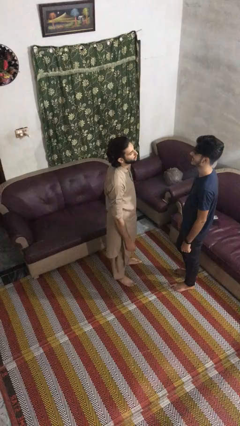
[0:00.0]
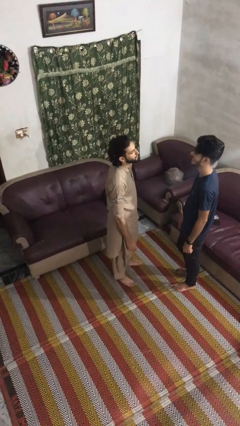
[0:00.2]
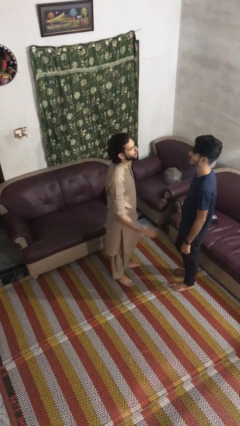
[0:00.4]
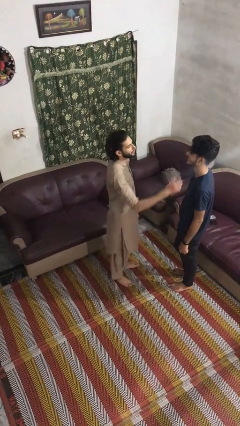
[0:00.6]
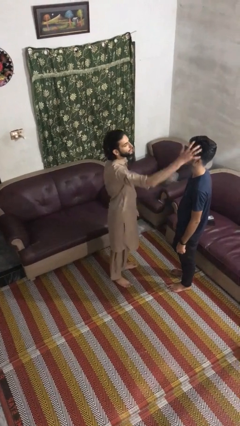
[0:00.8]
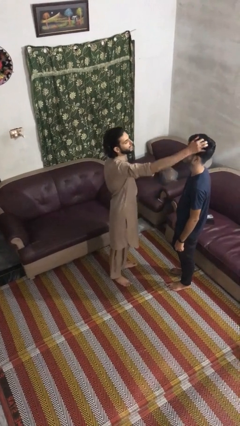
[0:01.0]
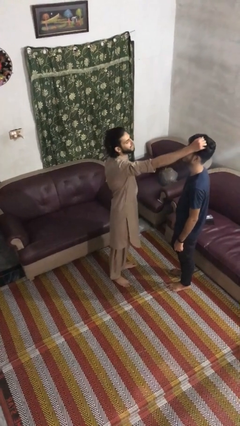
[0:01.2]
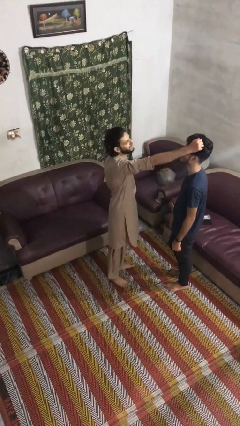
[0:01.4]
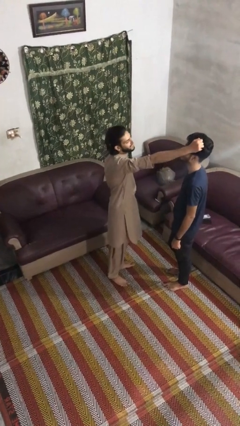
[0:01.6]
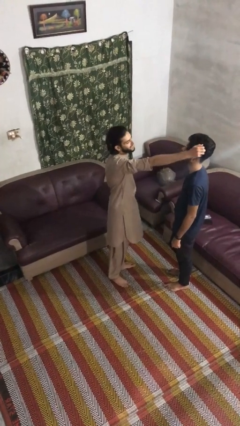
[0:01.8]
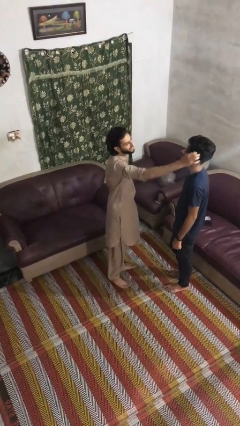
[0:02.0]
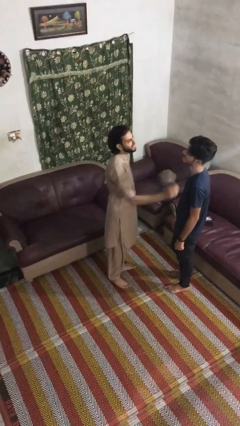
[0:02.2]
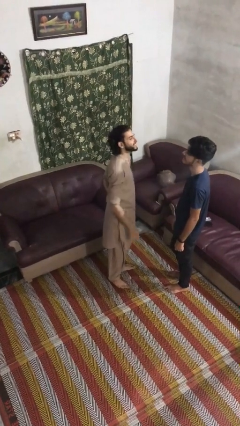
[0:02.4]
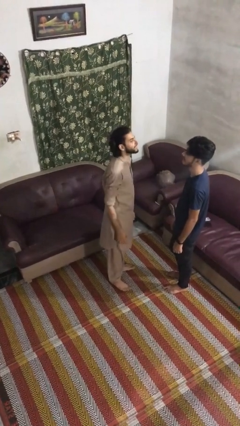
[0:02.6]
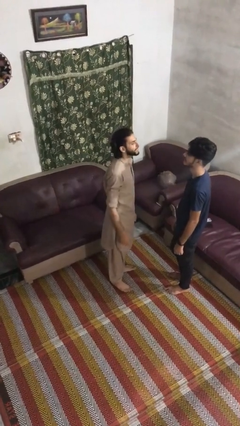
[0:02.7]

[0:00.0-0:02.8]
person grabs person by hair

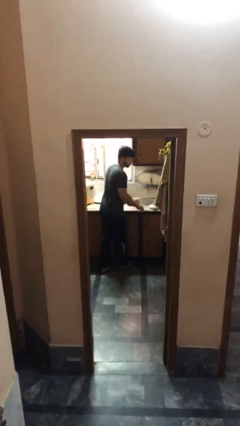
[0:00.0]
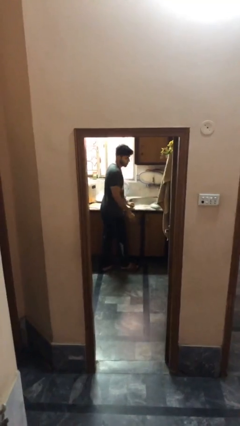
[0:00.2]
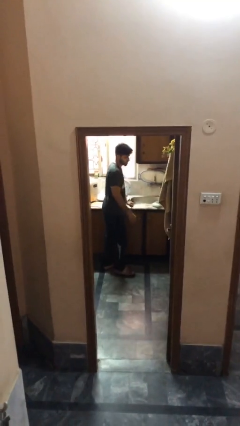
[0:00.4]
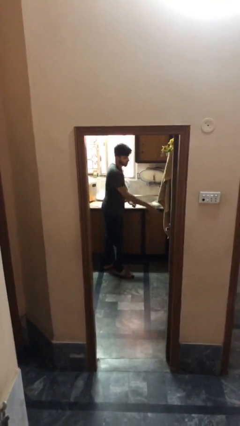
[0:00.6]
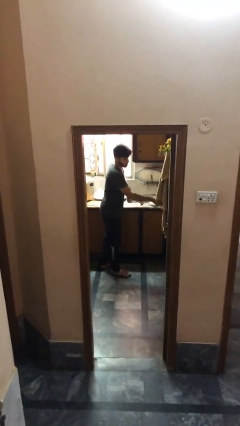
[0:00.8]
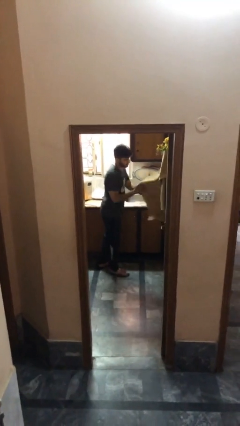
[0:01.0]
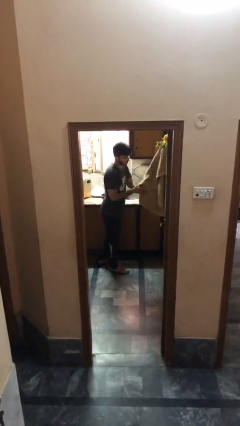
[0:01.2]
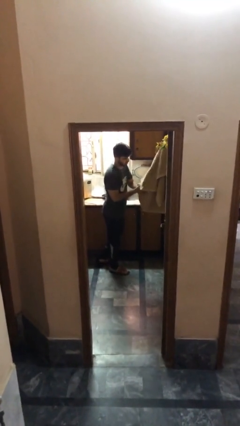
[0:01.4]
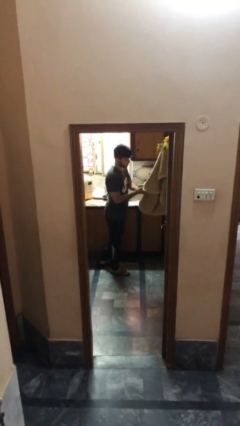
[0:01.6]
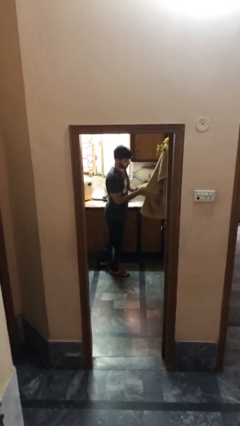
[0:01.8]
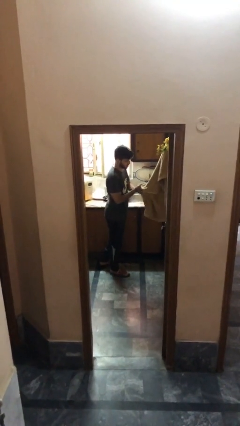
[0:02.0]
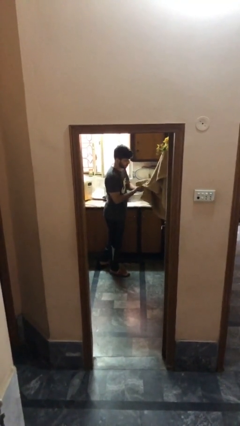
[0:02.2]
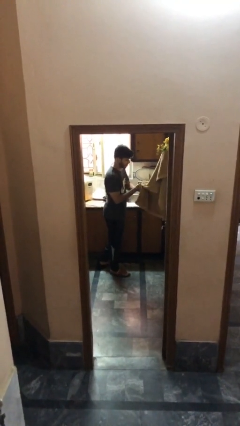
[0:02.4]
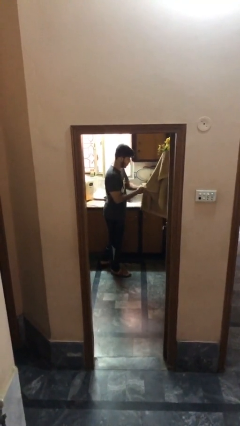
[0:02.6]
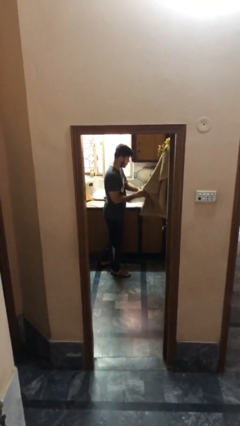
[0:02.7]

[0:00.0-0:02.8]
person dries hands with towel

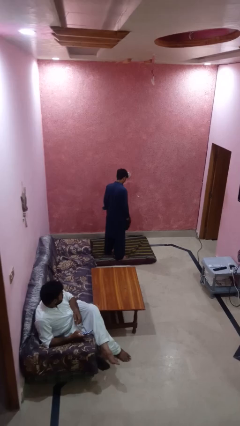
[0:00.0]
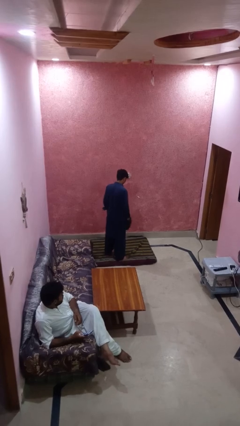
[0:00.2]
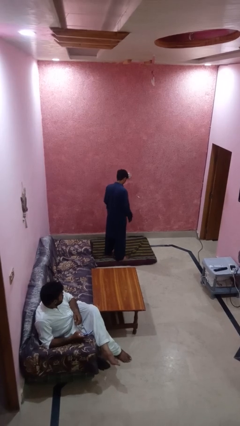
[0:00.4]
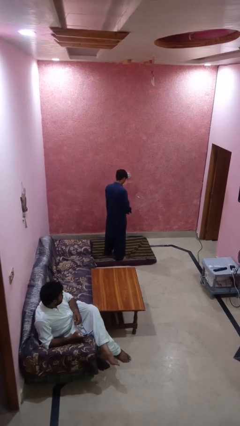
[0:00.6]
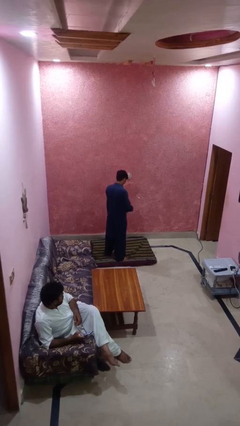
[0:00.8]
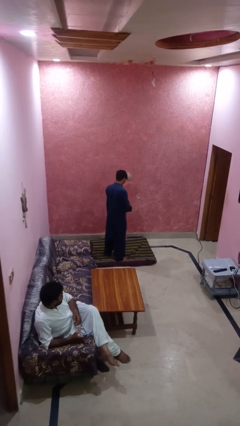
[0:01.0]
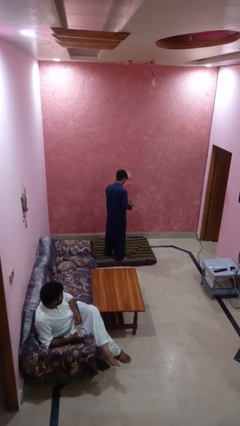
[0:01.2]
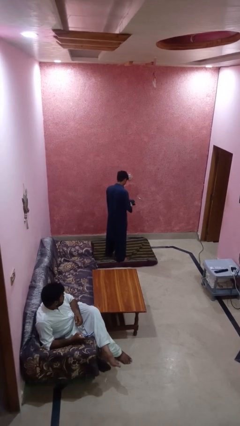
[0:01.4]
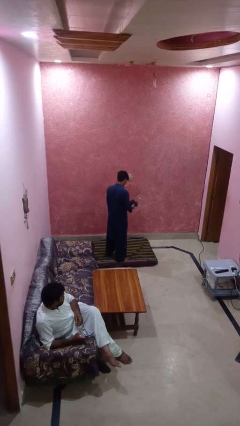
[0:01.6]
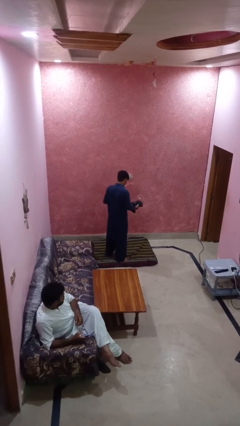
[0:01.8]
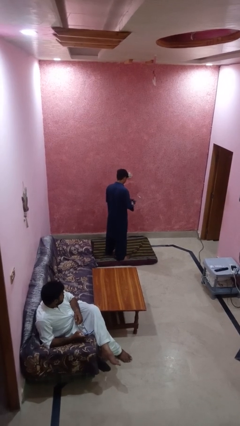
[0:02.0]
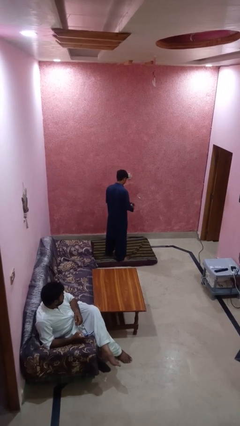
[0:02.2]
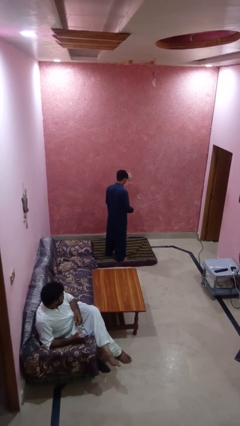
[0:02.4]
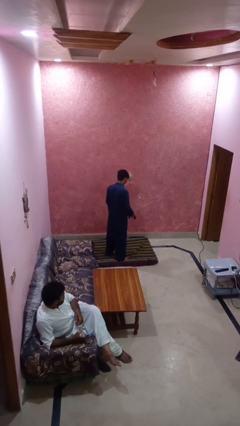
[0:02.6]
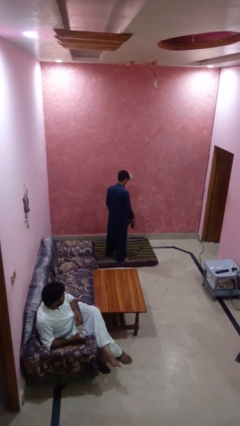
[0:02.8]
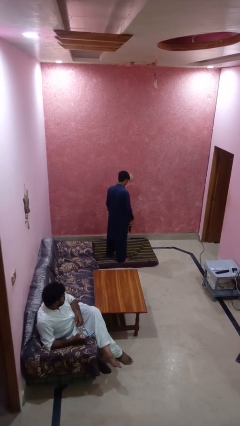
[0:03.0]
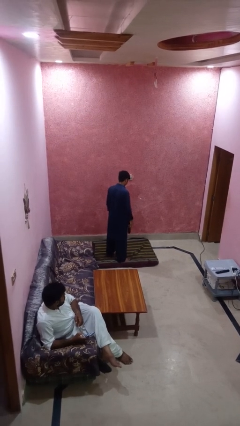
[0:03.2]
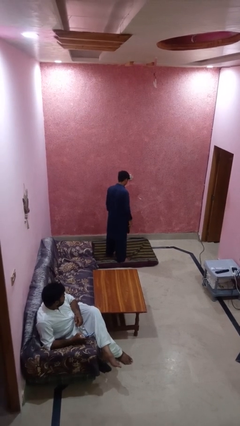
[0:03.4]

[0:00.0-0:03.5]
person takes off gloves

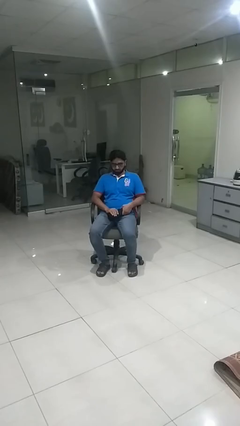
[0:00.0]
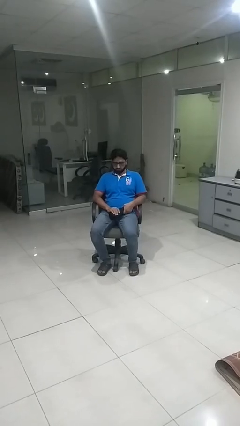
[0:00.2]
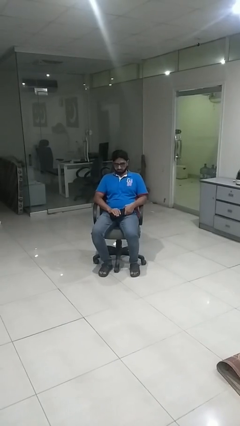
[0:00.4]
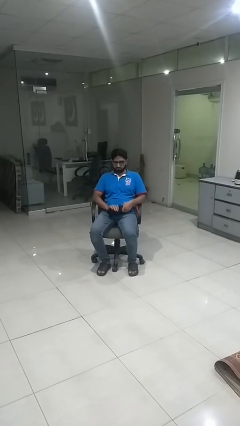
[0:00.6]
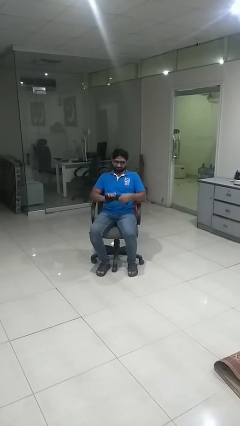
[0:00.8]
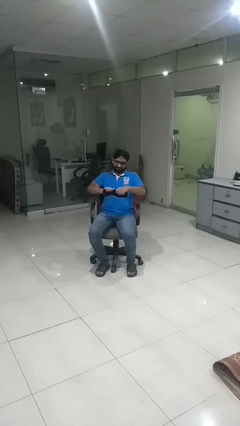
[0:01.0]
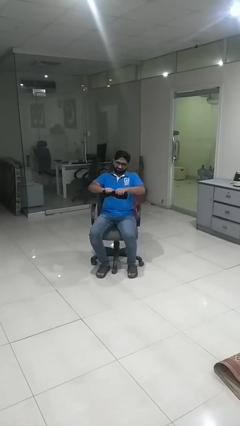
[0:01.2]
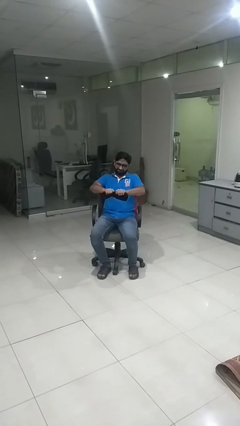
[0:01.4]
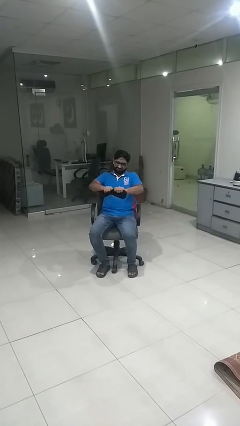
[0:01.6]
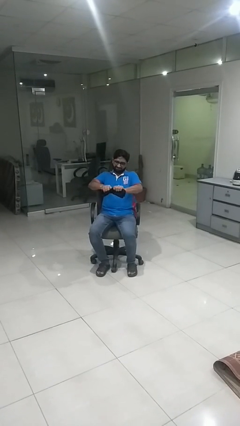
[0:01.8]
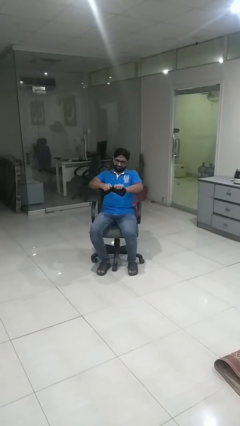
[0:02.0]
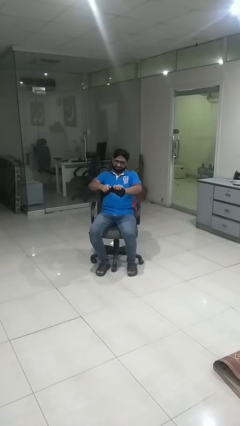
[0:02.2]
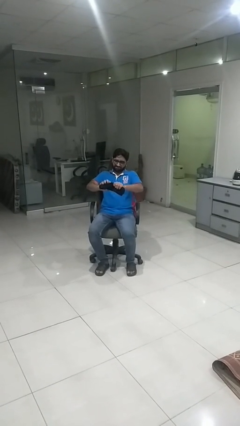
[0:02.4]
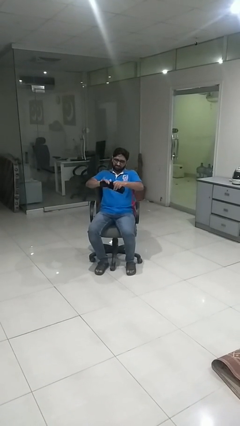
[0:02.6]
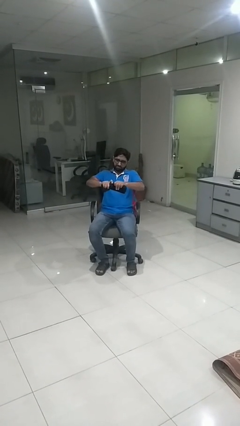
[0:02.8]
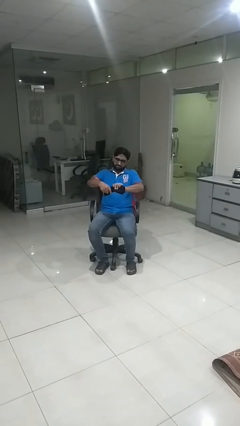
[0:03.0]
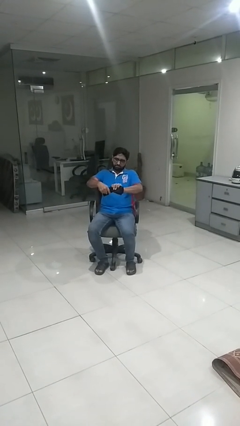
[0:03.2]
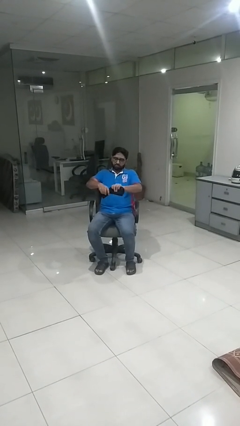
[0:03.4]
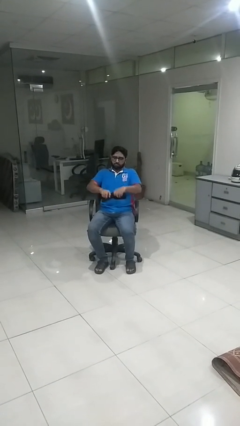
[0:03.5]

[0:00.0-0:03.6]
person squeezes object

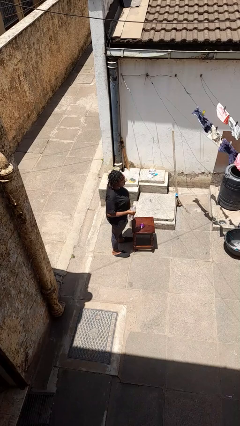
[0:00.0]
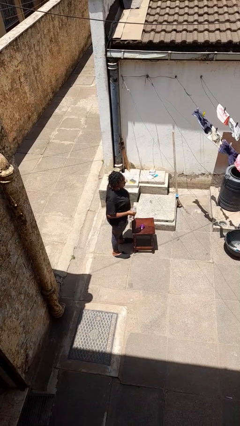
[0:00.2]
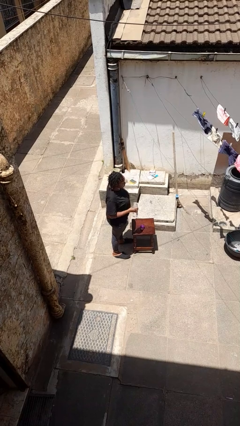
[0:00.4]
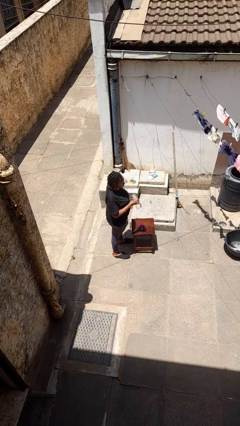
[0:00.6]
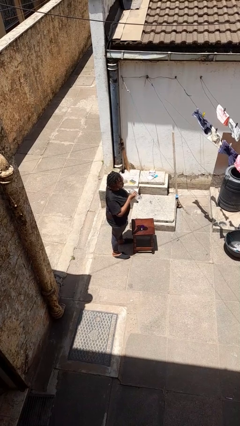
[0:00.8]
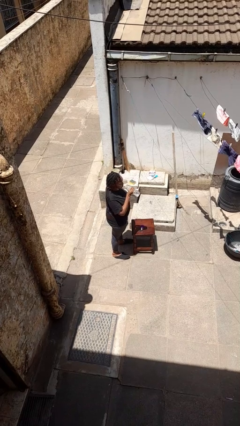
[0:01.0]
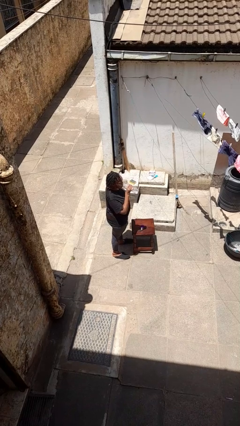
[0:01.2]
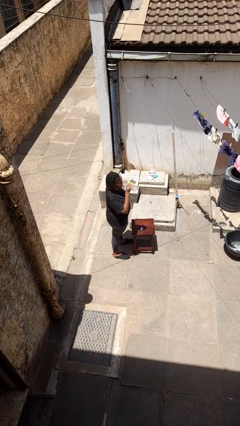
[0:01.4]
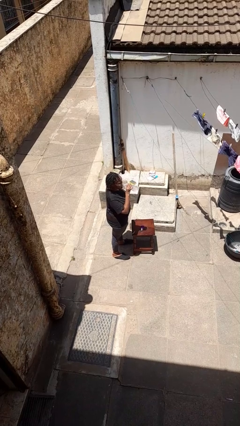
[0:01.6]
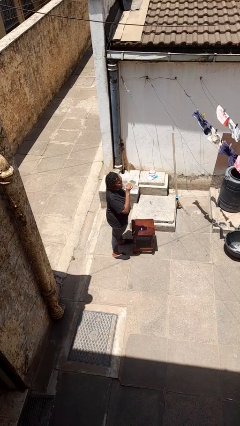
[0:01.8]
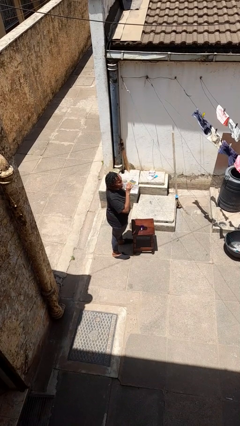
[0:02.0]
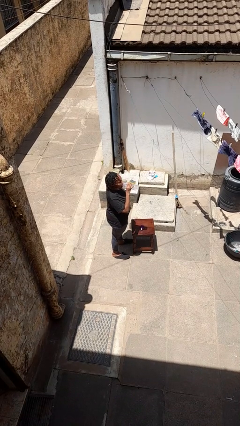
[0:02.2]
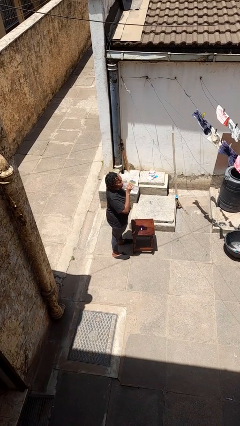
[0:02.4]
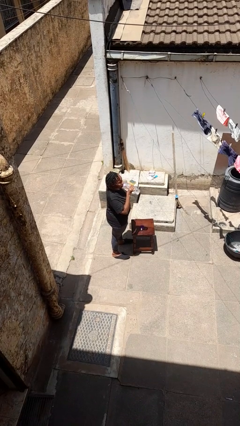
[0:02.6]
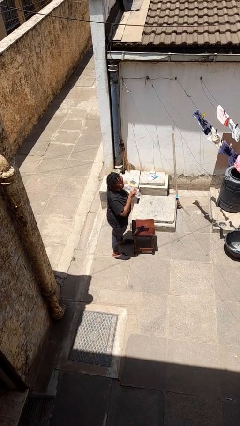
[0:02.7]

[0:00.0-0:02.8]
person drinks from bottle

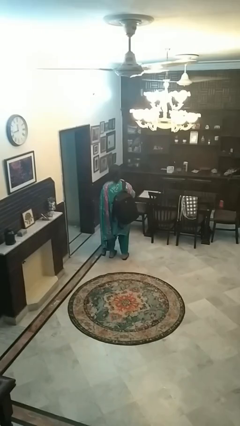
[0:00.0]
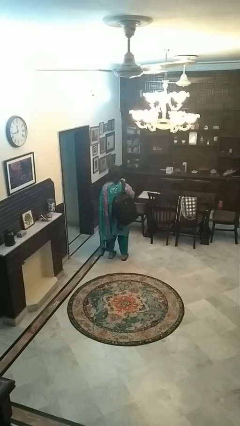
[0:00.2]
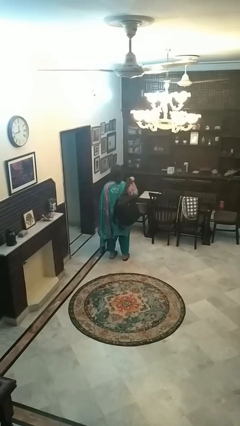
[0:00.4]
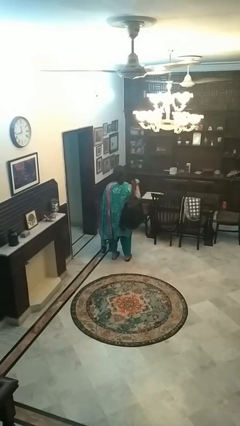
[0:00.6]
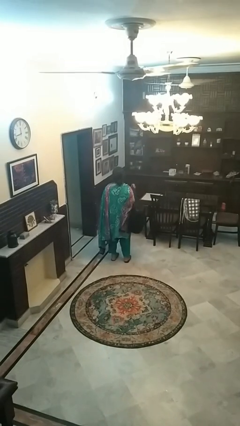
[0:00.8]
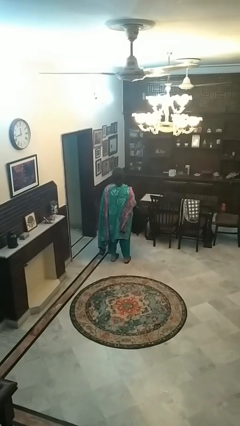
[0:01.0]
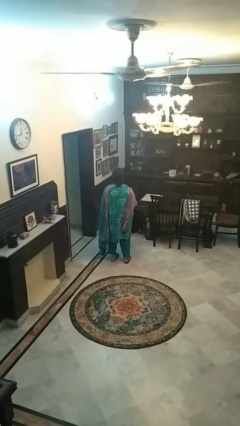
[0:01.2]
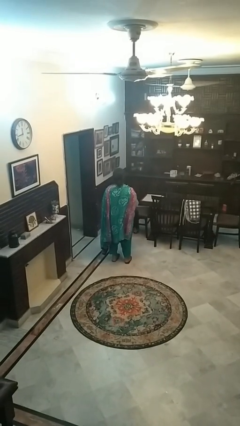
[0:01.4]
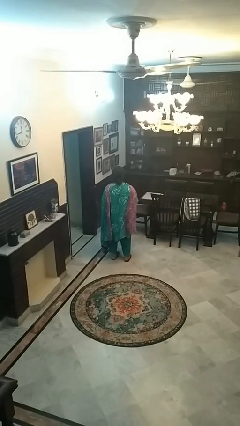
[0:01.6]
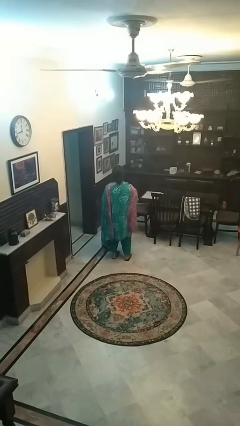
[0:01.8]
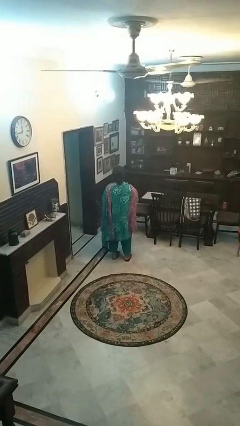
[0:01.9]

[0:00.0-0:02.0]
person takes off backpack

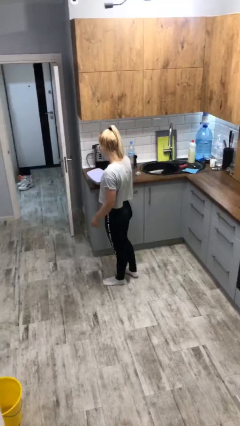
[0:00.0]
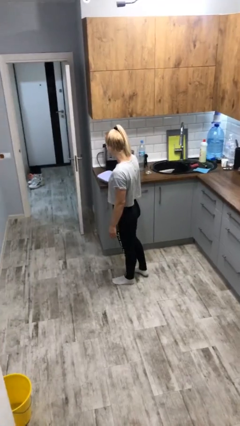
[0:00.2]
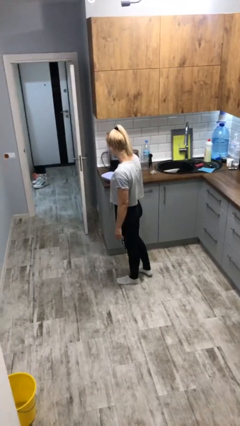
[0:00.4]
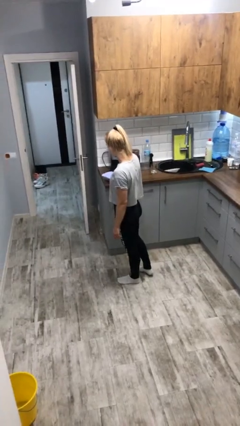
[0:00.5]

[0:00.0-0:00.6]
person puts down object on table
